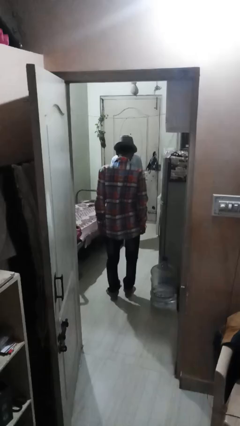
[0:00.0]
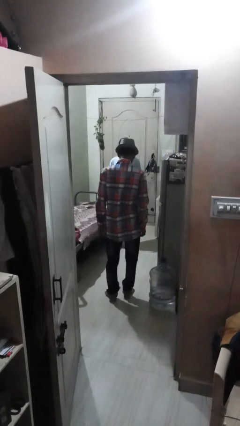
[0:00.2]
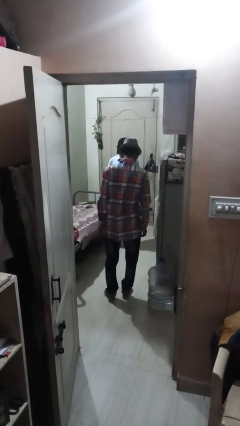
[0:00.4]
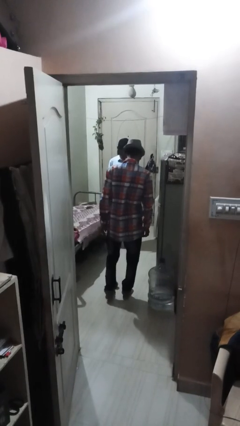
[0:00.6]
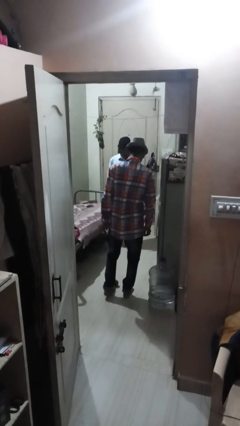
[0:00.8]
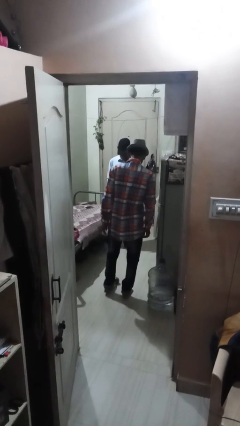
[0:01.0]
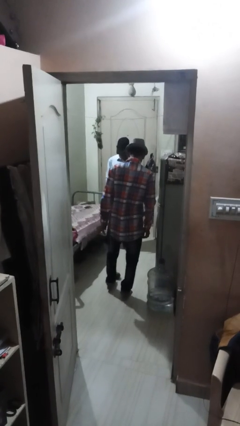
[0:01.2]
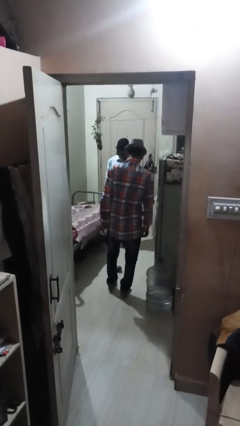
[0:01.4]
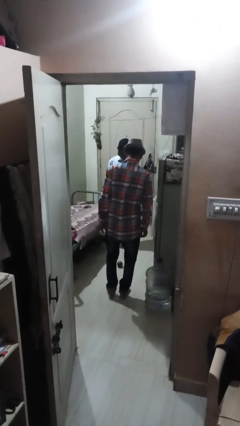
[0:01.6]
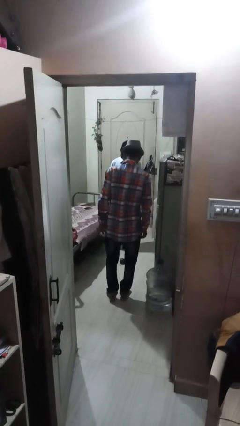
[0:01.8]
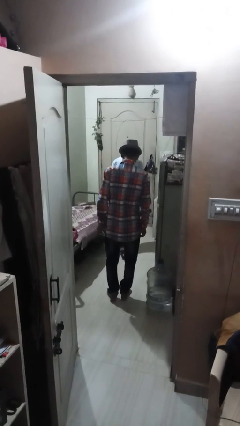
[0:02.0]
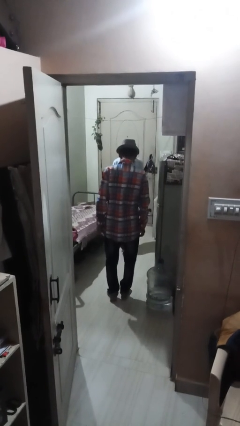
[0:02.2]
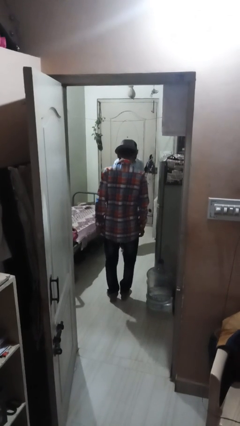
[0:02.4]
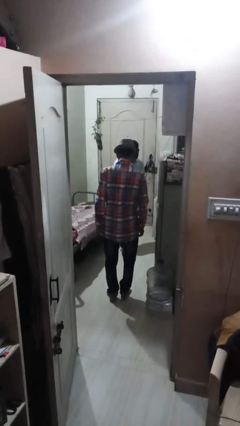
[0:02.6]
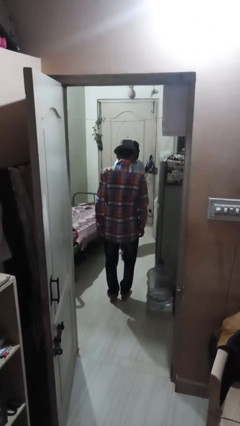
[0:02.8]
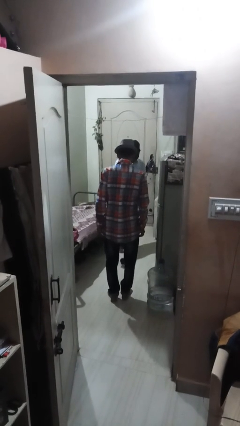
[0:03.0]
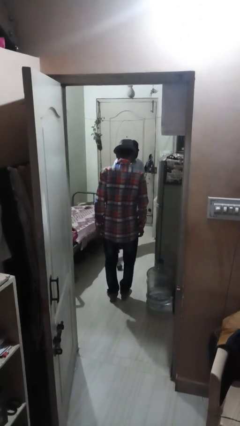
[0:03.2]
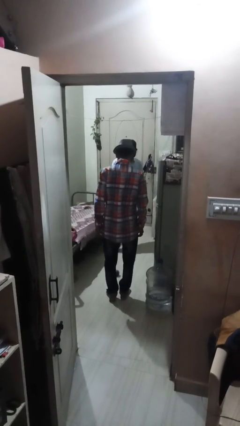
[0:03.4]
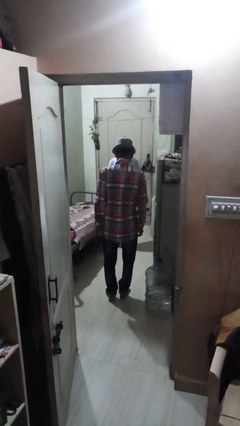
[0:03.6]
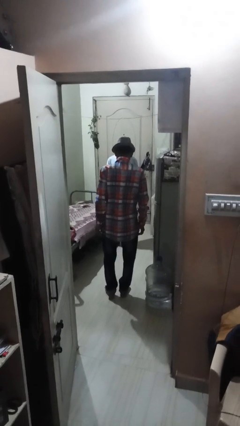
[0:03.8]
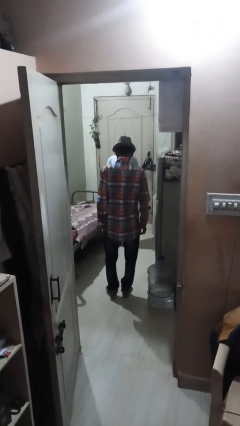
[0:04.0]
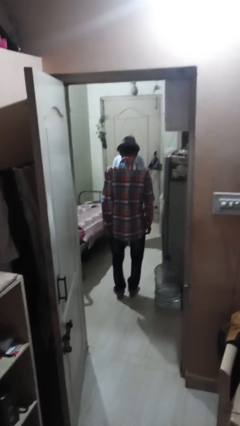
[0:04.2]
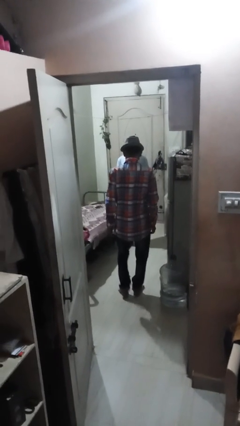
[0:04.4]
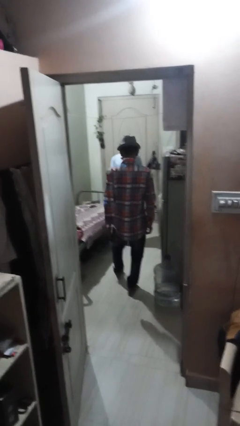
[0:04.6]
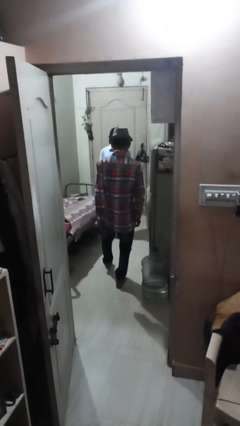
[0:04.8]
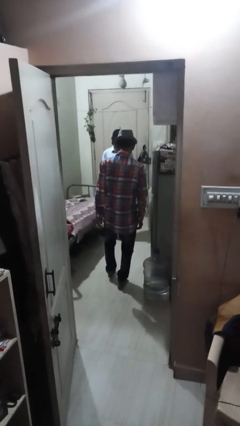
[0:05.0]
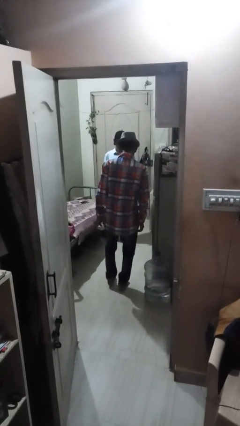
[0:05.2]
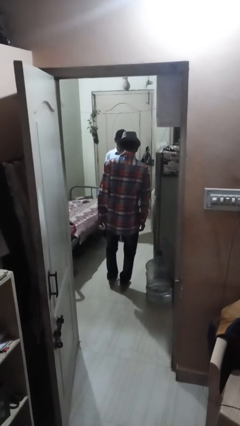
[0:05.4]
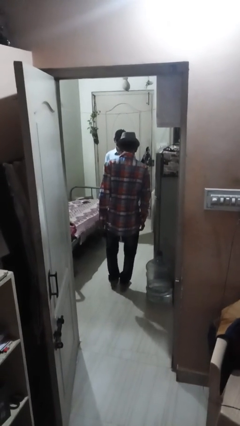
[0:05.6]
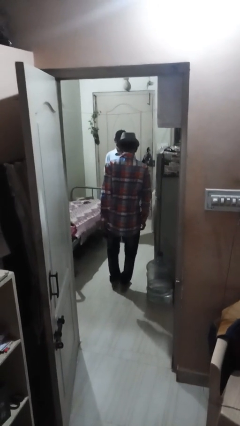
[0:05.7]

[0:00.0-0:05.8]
person kicks object to person

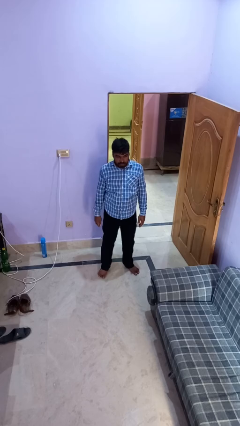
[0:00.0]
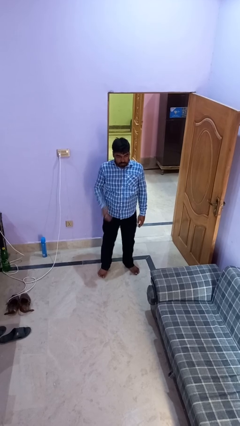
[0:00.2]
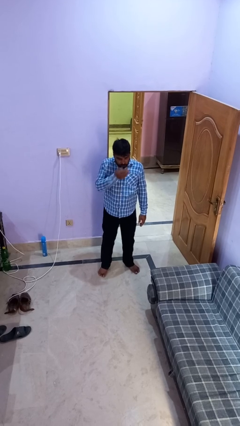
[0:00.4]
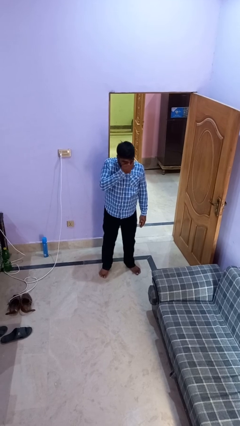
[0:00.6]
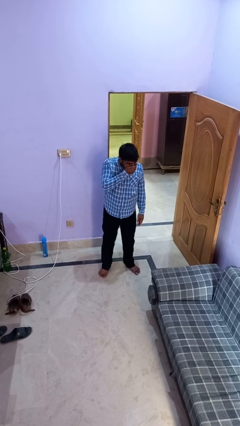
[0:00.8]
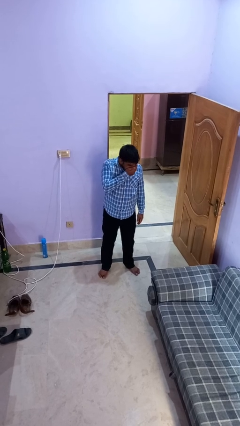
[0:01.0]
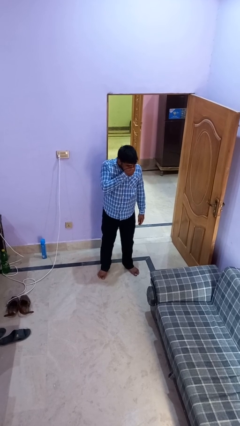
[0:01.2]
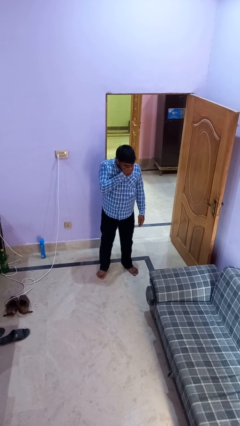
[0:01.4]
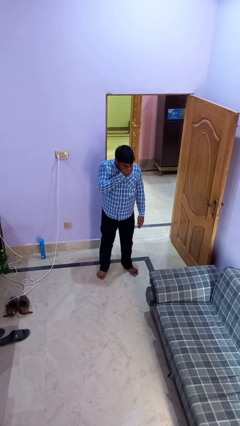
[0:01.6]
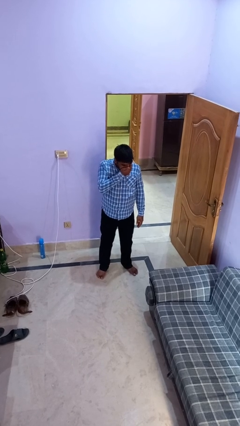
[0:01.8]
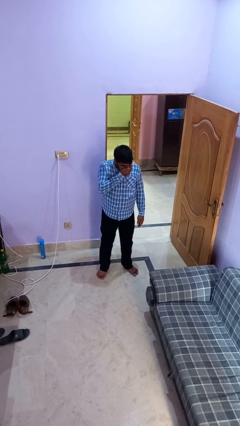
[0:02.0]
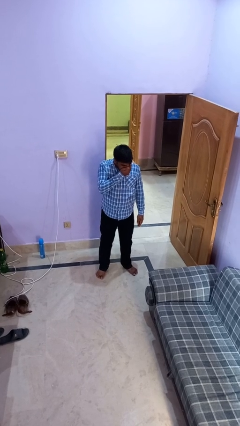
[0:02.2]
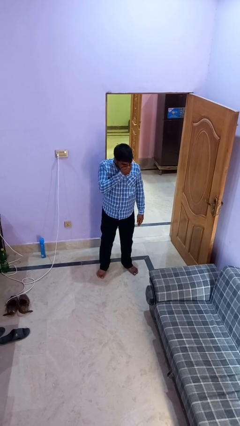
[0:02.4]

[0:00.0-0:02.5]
person sneezes into hand

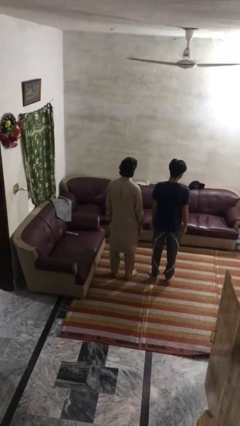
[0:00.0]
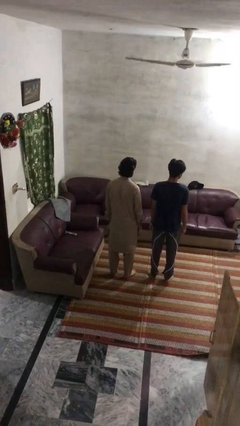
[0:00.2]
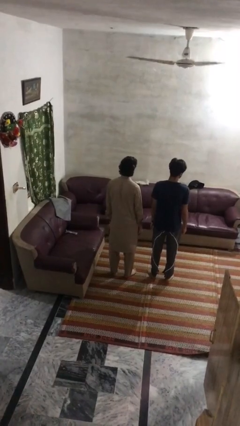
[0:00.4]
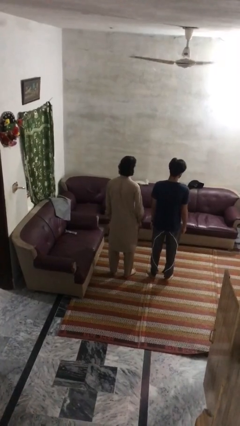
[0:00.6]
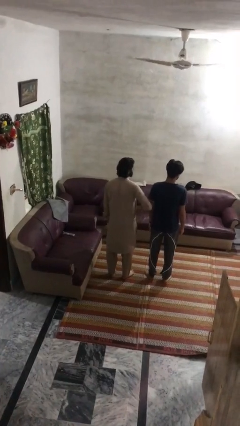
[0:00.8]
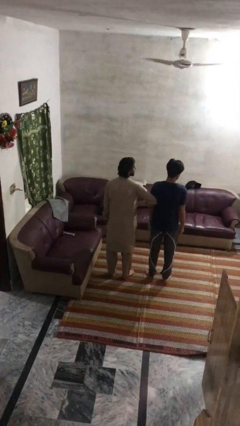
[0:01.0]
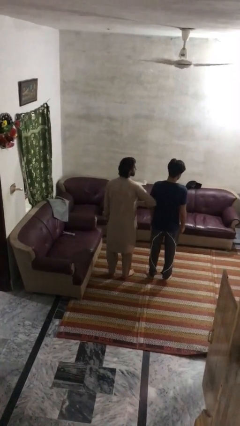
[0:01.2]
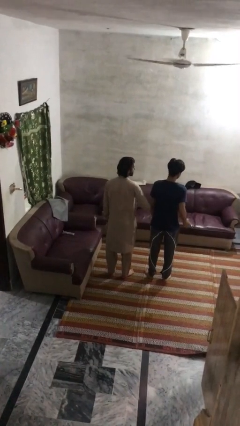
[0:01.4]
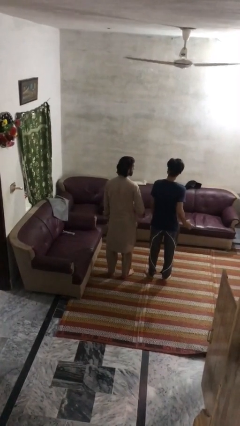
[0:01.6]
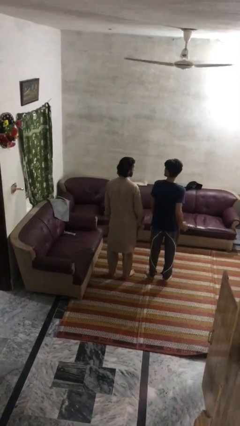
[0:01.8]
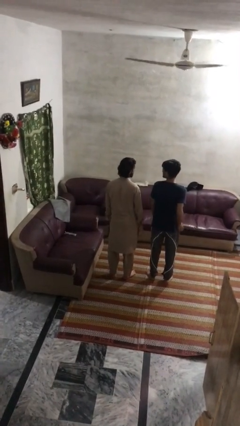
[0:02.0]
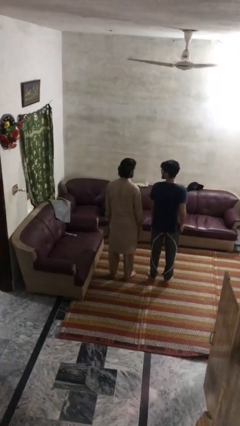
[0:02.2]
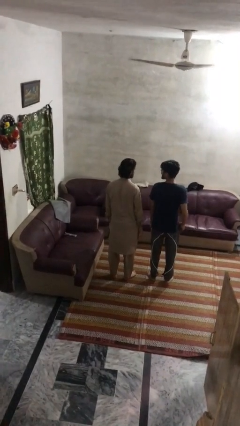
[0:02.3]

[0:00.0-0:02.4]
person nudges person with elbow

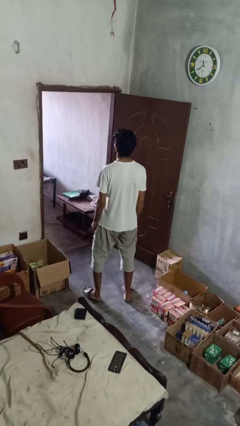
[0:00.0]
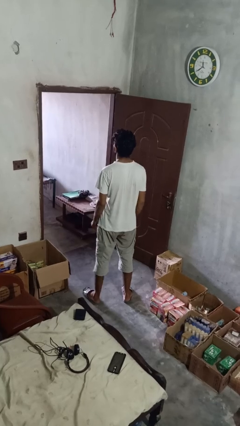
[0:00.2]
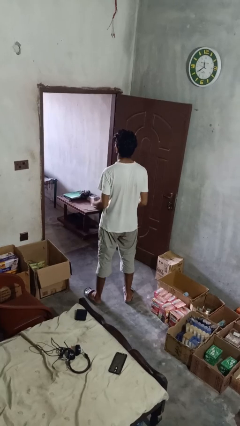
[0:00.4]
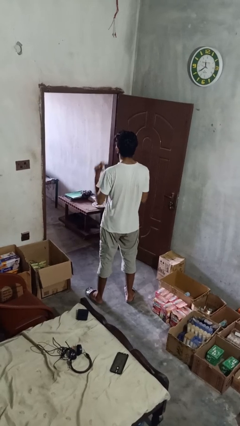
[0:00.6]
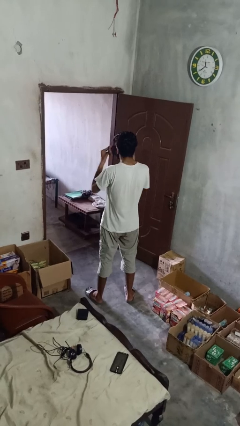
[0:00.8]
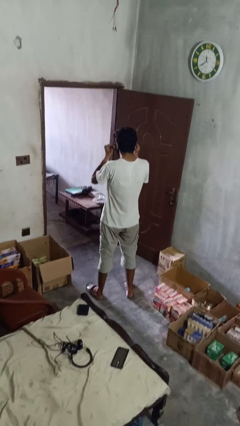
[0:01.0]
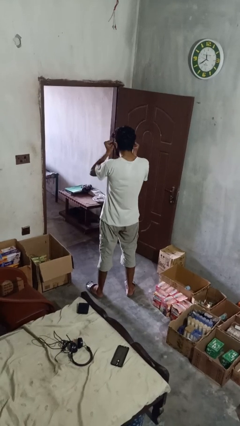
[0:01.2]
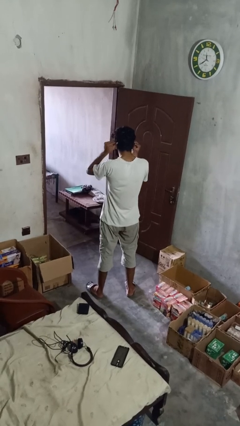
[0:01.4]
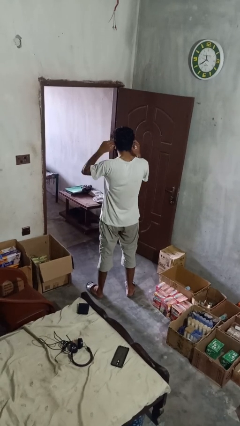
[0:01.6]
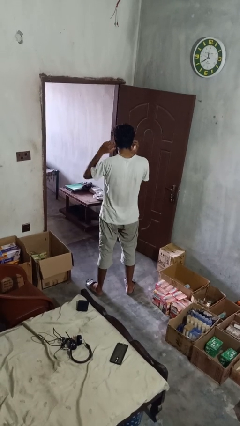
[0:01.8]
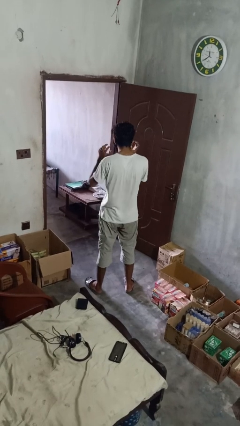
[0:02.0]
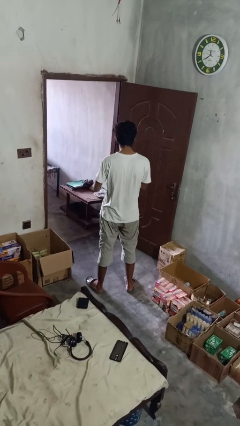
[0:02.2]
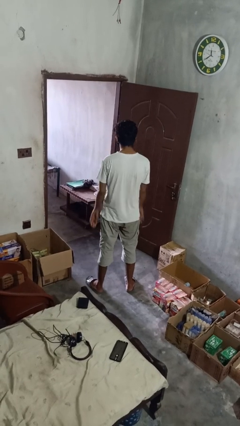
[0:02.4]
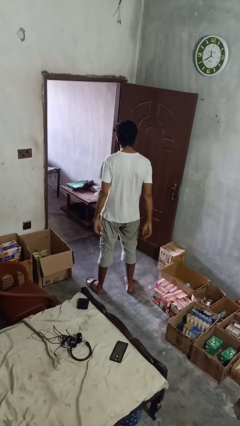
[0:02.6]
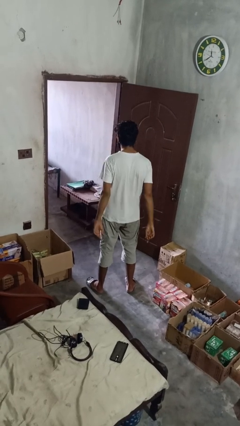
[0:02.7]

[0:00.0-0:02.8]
person puts on facemask

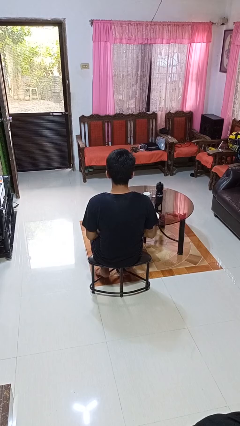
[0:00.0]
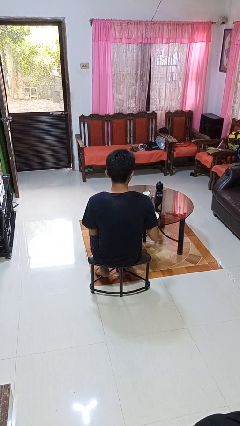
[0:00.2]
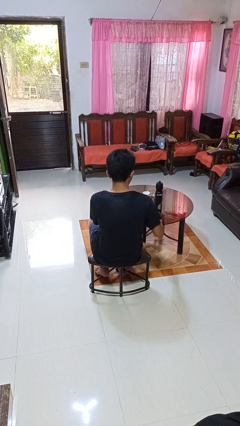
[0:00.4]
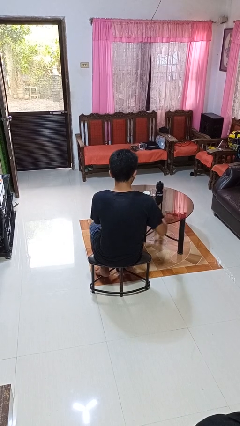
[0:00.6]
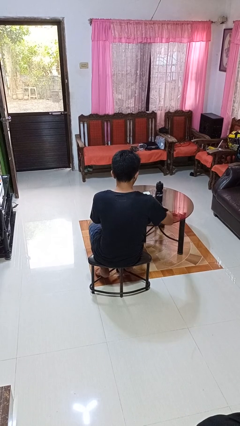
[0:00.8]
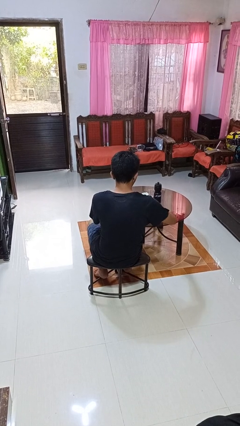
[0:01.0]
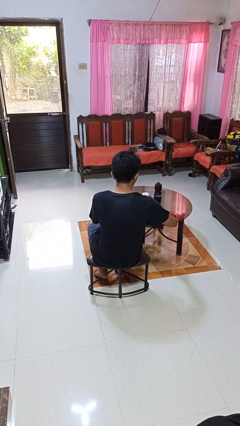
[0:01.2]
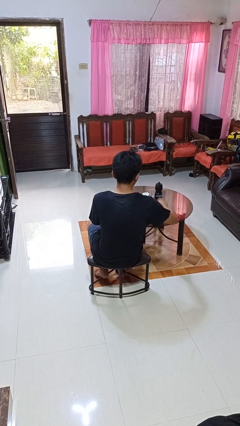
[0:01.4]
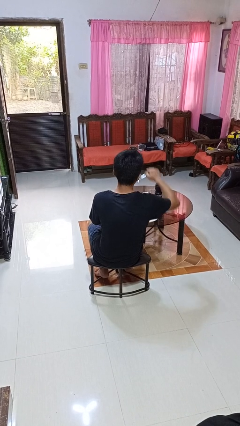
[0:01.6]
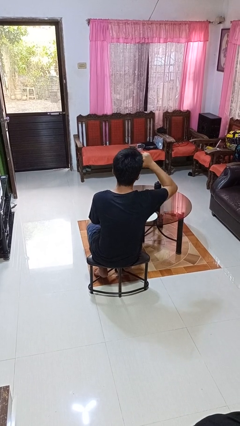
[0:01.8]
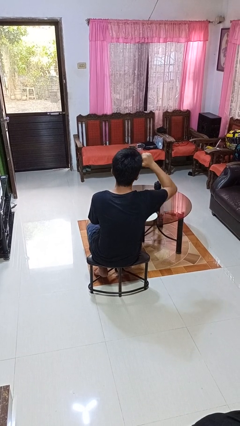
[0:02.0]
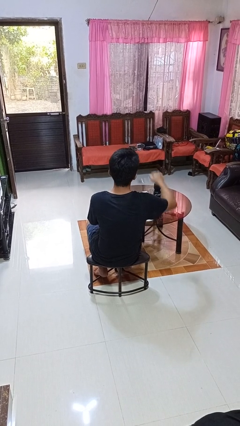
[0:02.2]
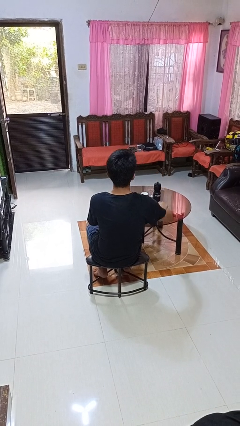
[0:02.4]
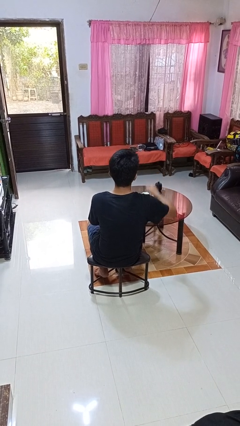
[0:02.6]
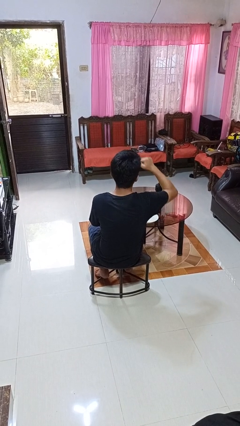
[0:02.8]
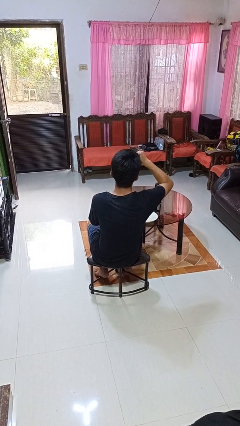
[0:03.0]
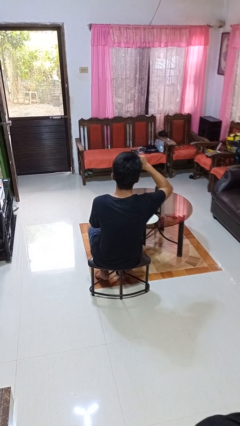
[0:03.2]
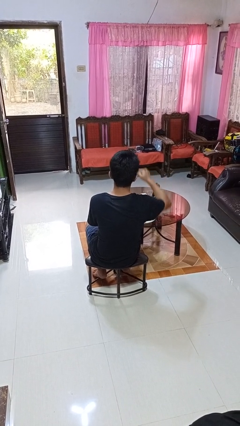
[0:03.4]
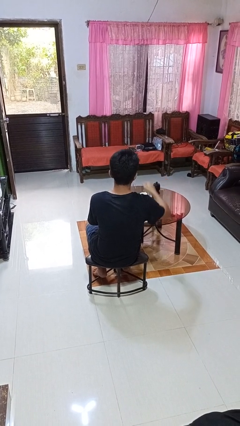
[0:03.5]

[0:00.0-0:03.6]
person eats with utensil

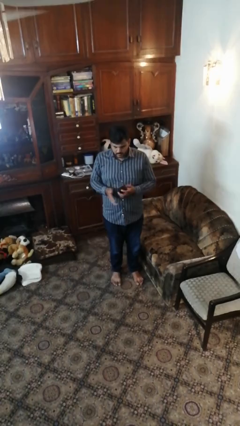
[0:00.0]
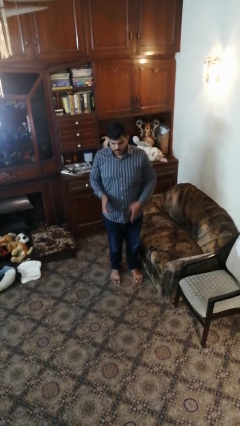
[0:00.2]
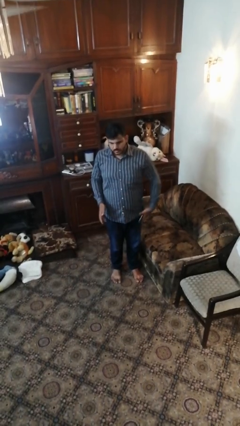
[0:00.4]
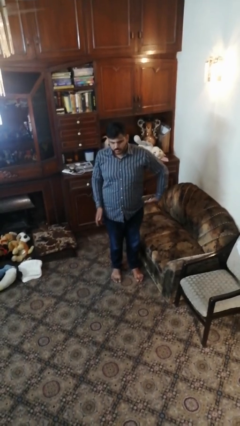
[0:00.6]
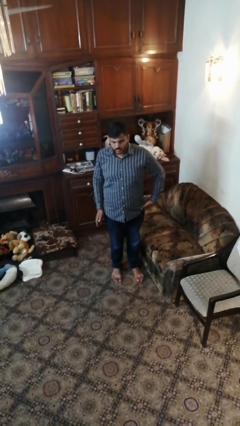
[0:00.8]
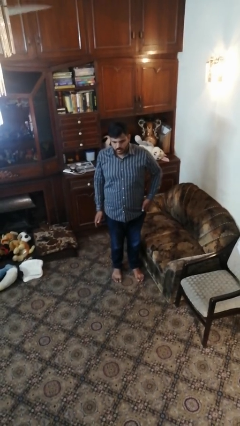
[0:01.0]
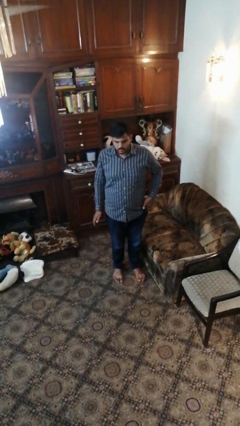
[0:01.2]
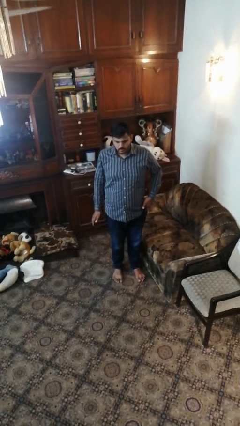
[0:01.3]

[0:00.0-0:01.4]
person puts phone into pocket
